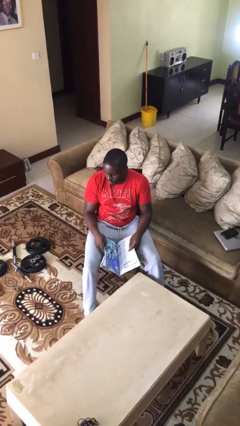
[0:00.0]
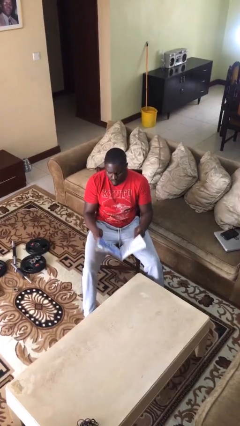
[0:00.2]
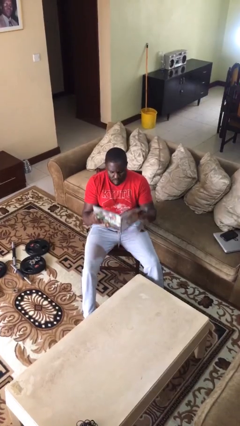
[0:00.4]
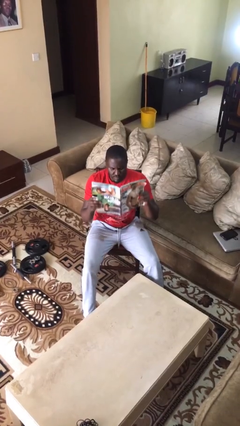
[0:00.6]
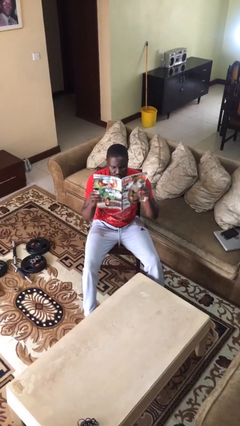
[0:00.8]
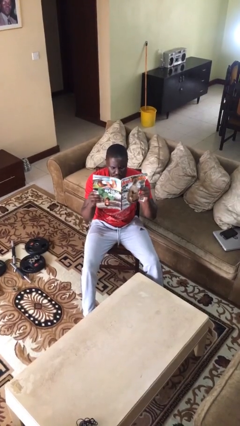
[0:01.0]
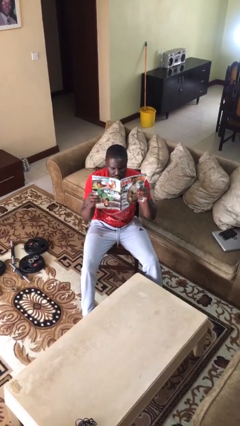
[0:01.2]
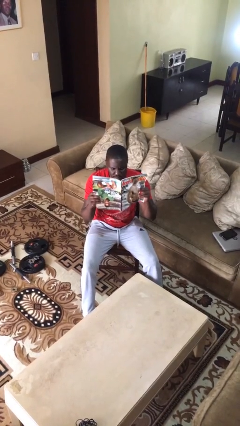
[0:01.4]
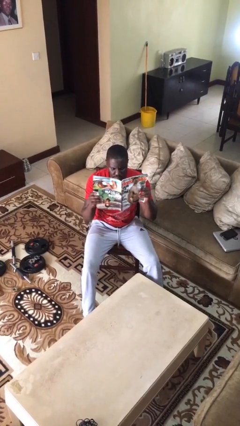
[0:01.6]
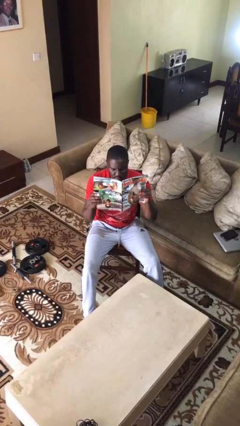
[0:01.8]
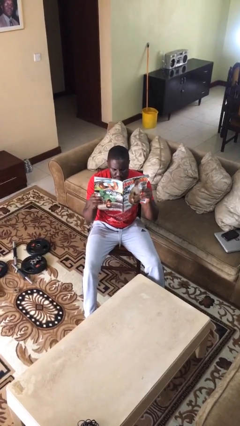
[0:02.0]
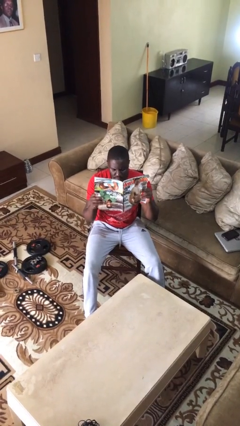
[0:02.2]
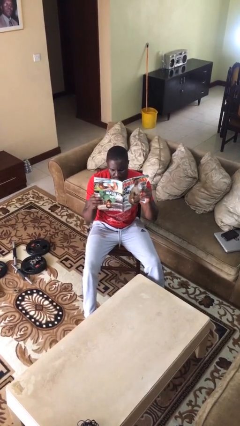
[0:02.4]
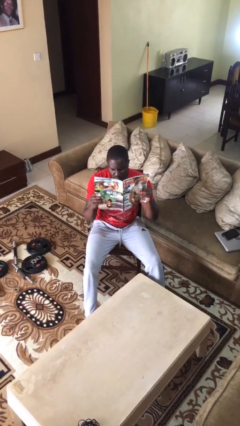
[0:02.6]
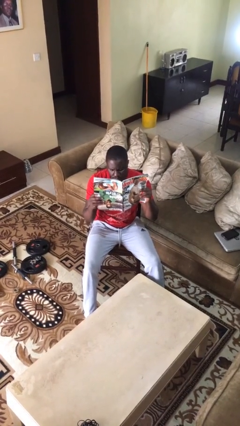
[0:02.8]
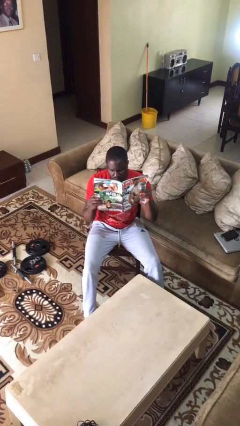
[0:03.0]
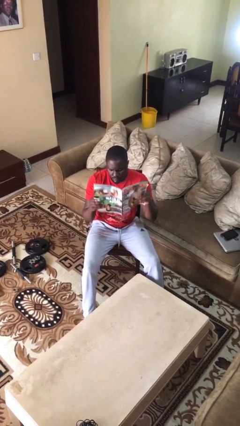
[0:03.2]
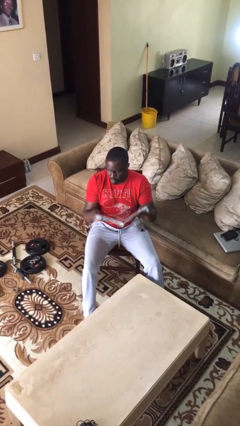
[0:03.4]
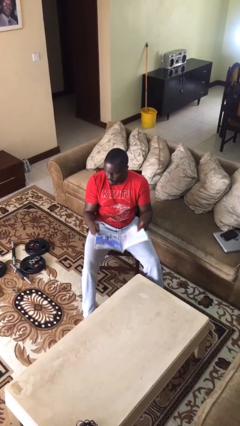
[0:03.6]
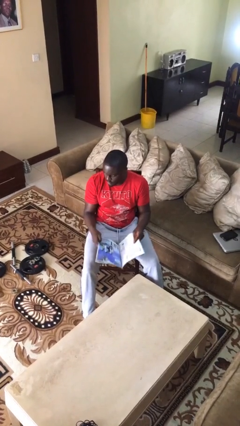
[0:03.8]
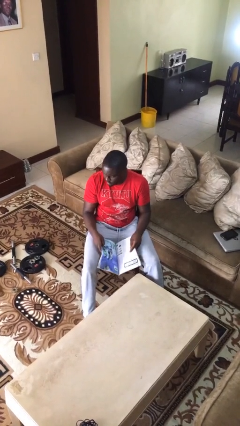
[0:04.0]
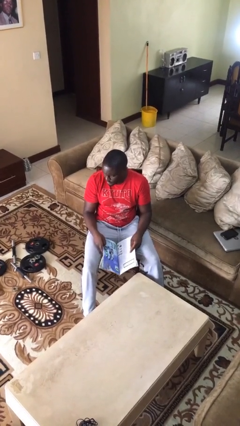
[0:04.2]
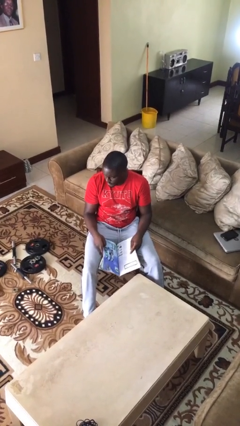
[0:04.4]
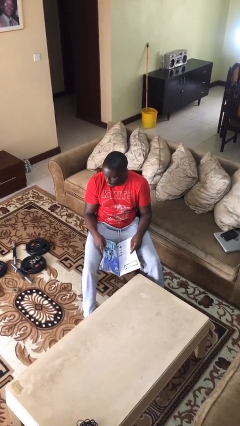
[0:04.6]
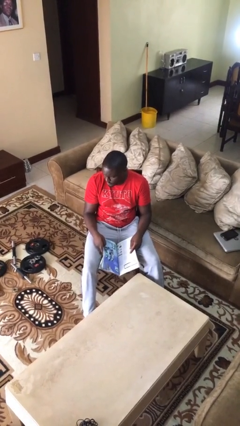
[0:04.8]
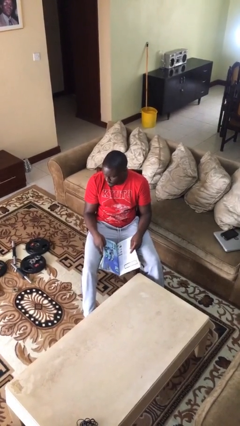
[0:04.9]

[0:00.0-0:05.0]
person reads document

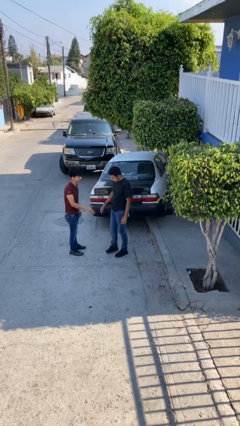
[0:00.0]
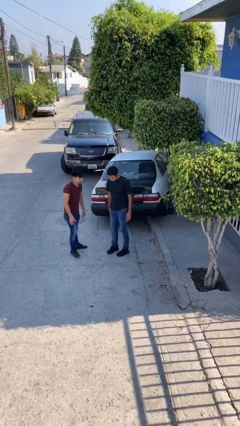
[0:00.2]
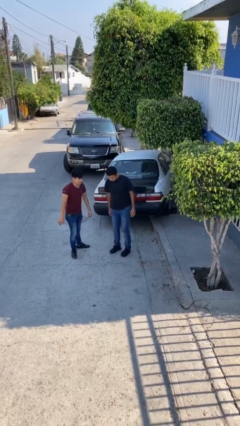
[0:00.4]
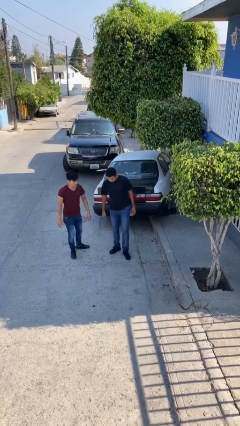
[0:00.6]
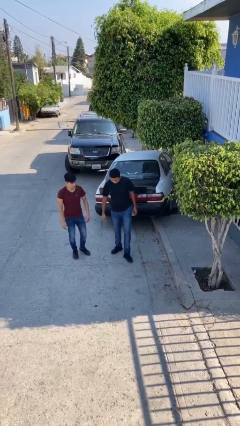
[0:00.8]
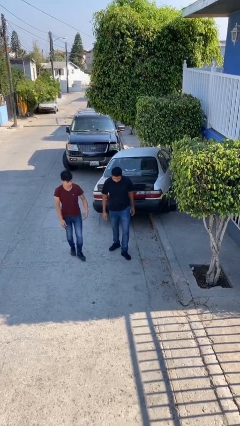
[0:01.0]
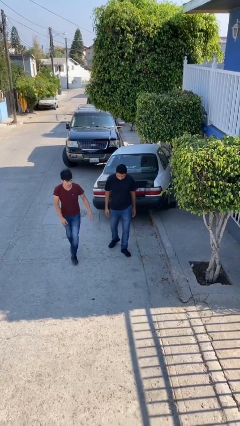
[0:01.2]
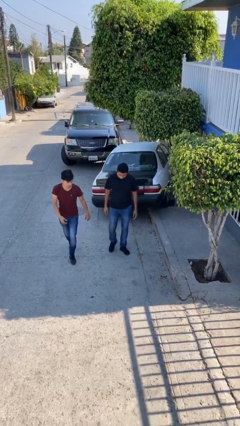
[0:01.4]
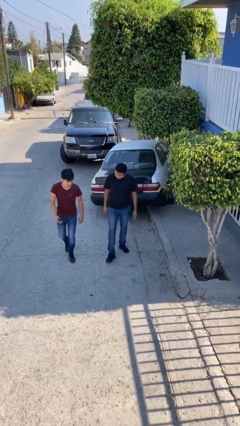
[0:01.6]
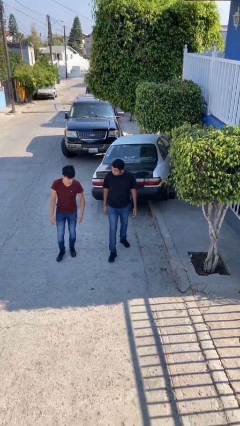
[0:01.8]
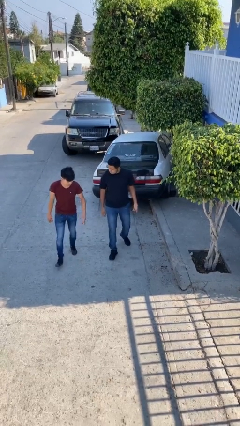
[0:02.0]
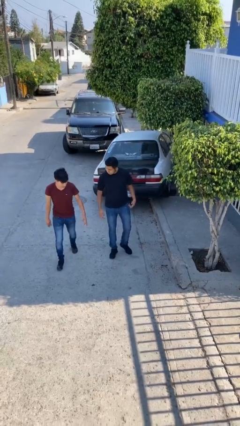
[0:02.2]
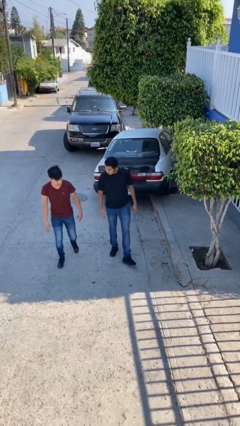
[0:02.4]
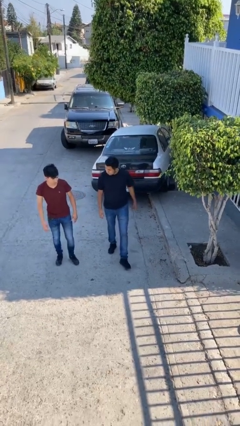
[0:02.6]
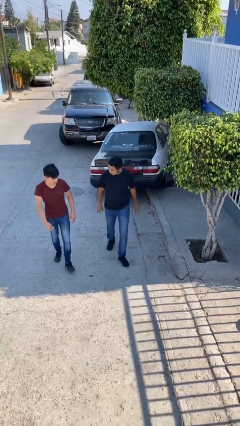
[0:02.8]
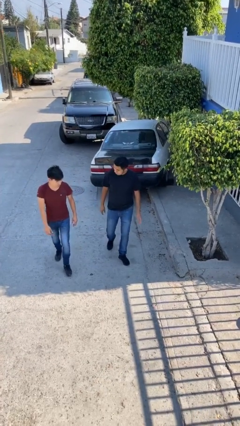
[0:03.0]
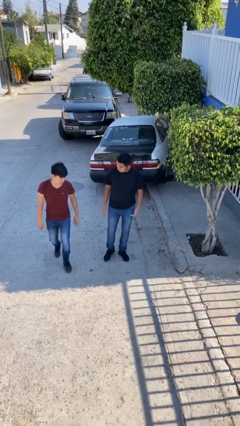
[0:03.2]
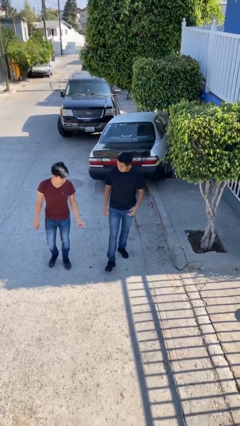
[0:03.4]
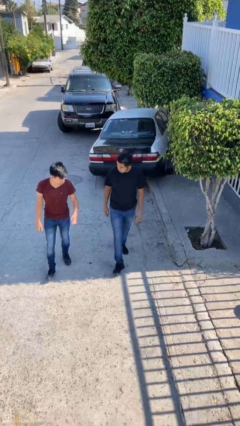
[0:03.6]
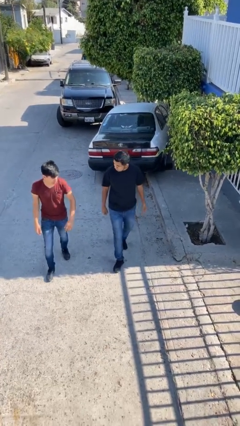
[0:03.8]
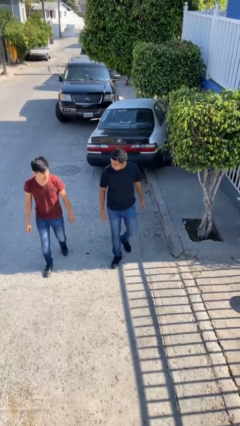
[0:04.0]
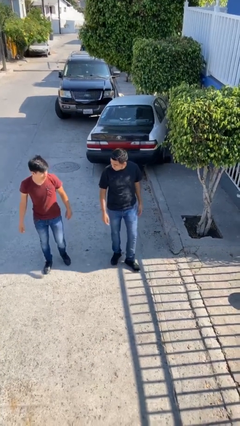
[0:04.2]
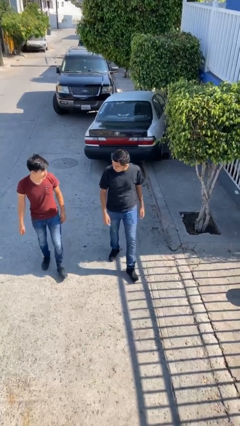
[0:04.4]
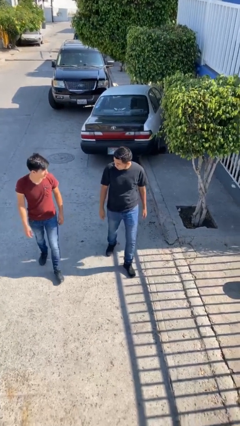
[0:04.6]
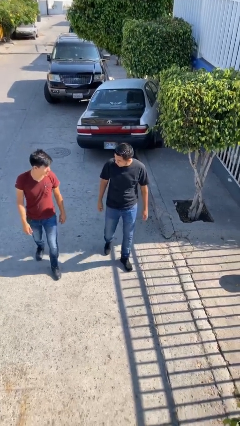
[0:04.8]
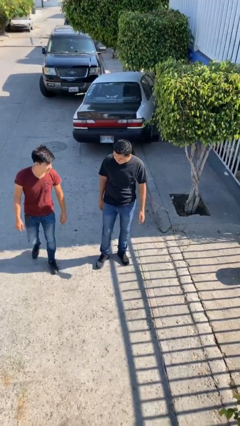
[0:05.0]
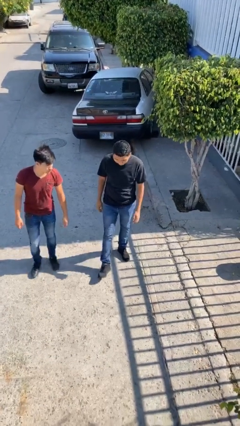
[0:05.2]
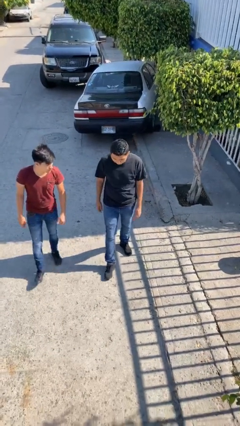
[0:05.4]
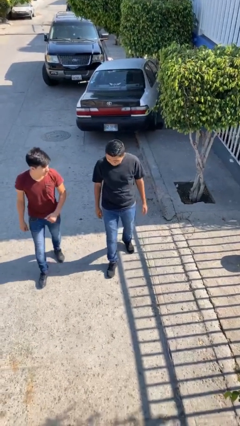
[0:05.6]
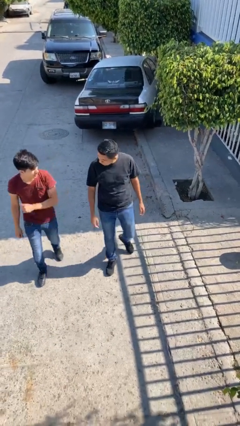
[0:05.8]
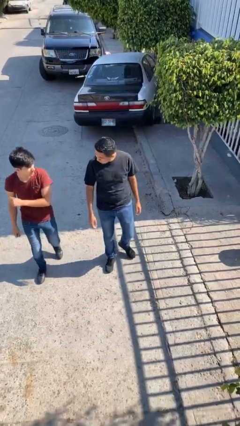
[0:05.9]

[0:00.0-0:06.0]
person talks to person

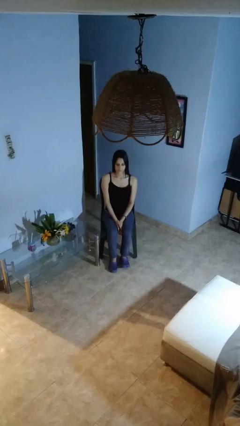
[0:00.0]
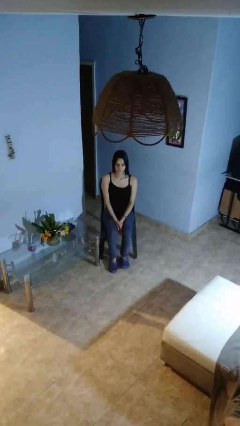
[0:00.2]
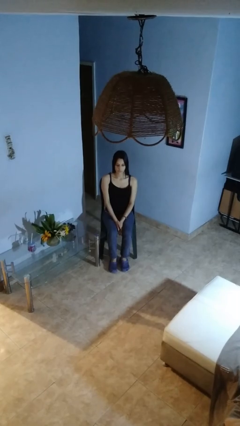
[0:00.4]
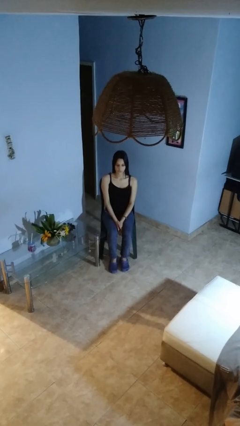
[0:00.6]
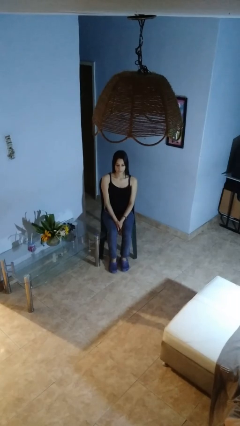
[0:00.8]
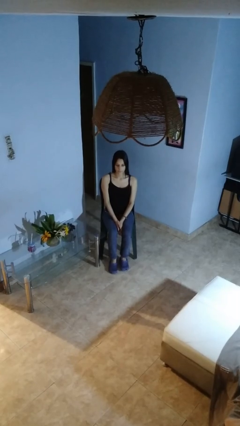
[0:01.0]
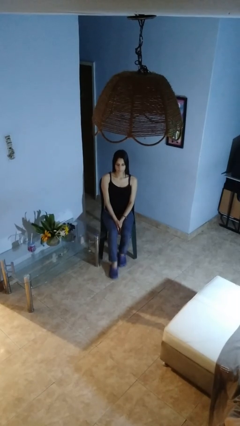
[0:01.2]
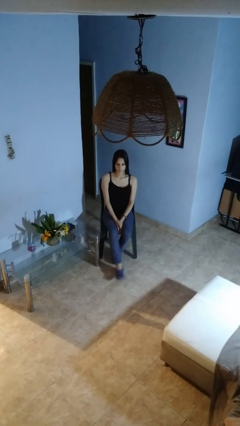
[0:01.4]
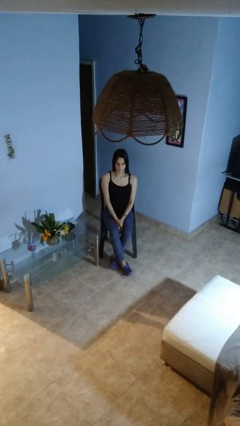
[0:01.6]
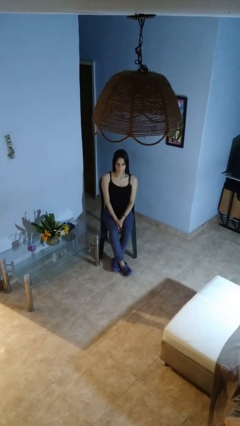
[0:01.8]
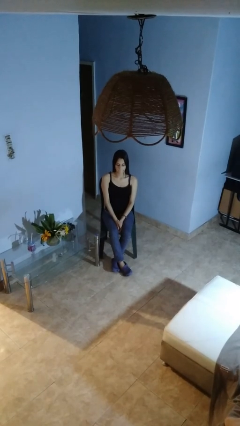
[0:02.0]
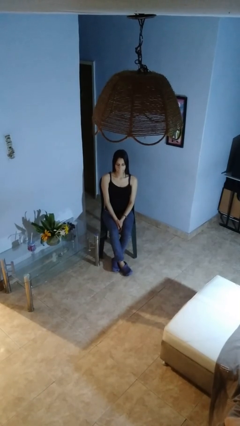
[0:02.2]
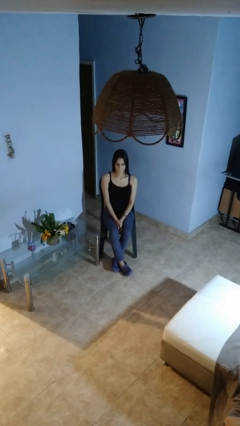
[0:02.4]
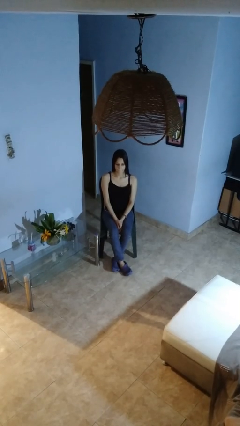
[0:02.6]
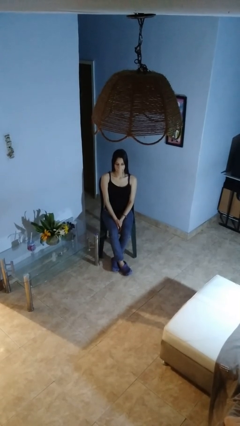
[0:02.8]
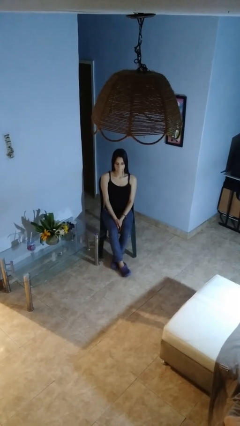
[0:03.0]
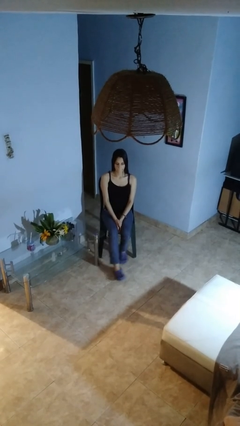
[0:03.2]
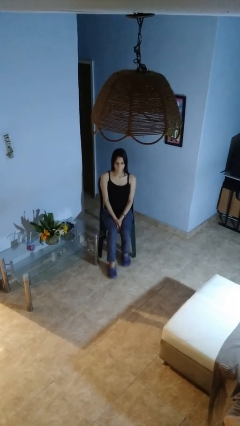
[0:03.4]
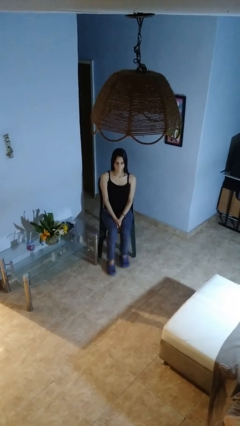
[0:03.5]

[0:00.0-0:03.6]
person crosses legs

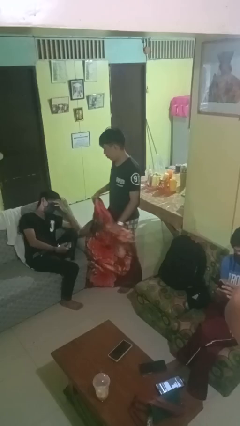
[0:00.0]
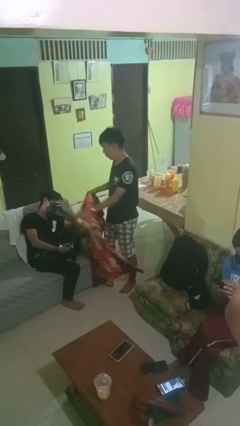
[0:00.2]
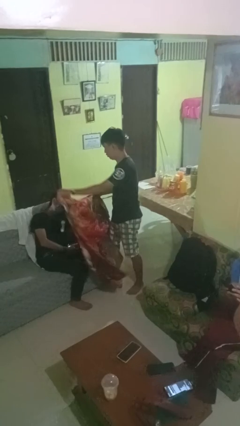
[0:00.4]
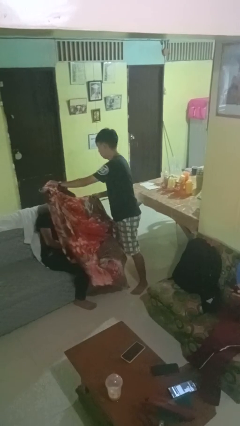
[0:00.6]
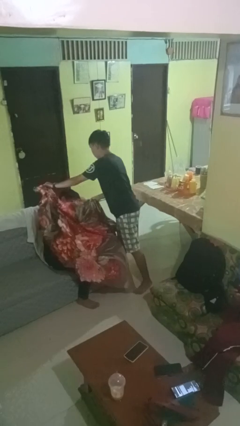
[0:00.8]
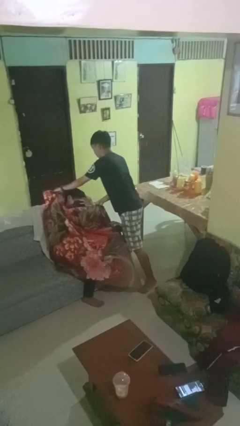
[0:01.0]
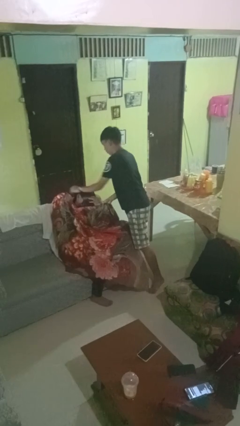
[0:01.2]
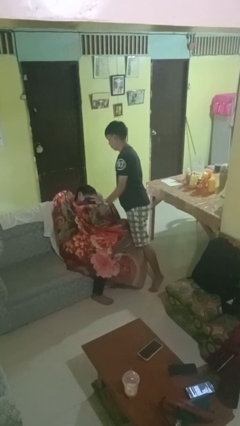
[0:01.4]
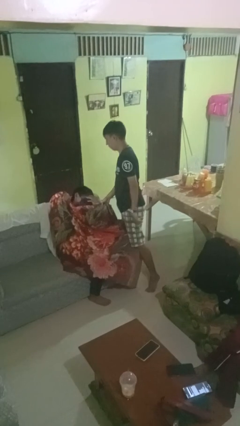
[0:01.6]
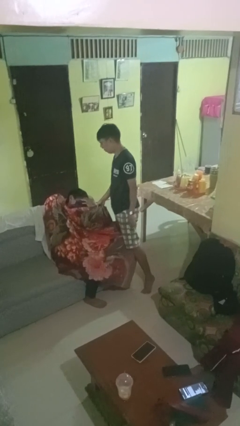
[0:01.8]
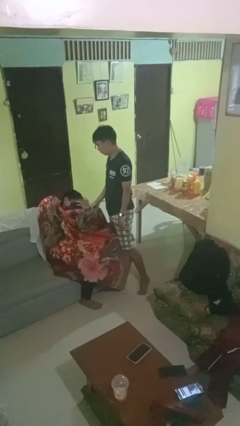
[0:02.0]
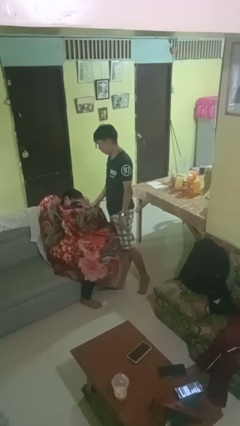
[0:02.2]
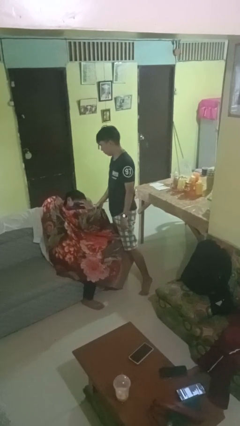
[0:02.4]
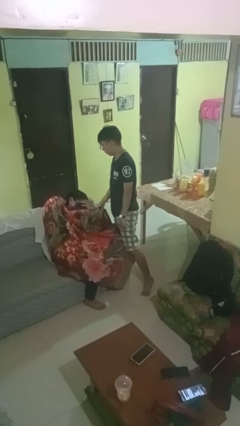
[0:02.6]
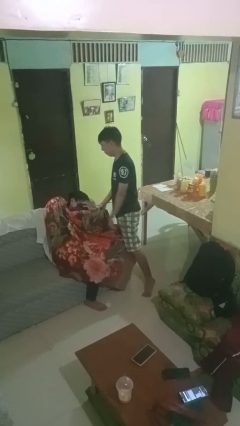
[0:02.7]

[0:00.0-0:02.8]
person covers friend with blanket

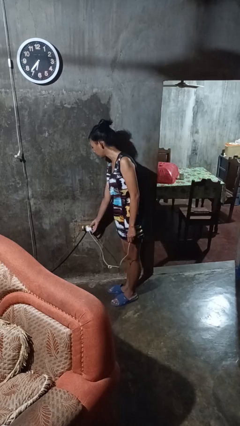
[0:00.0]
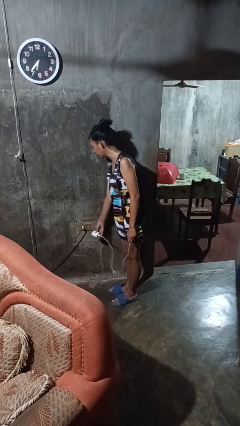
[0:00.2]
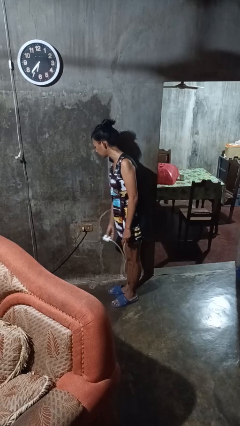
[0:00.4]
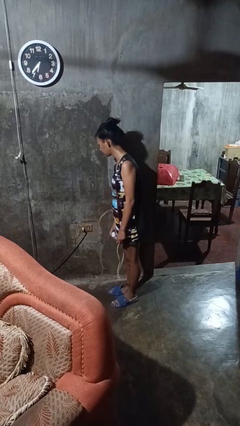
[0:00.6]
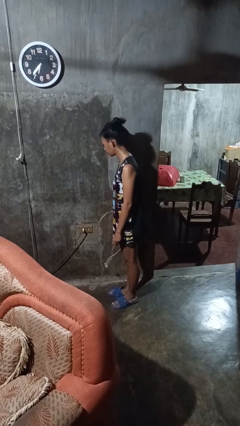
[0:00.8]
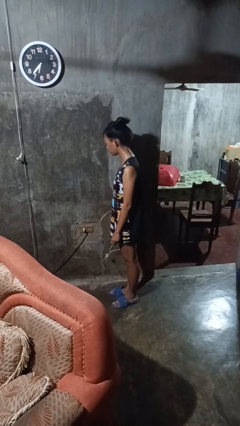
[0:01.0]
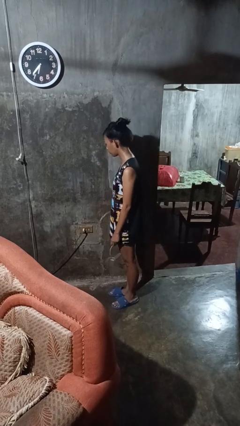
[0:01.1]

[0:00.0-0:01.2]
person unplugs from electrical socket
